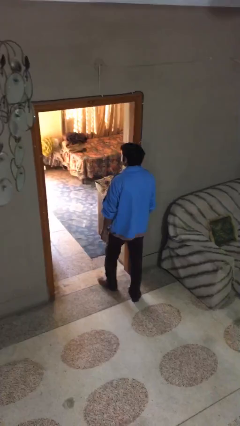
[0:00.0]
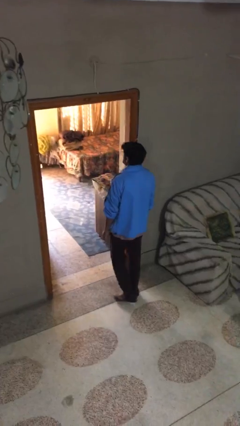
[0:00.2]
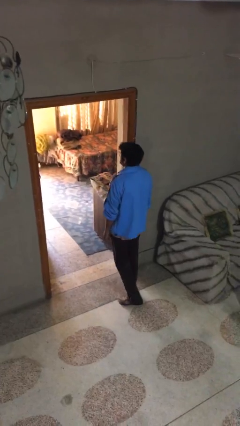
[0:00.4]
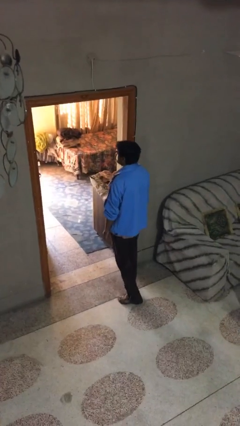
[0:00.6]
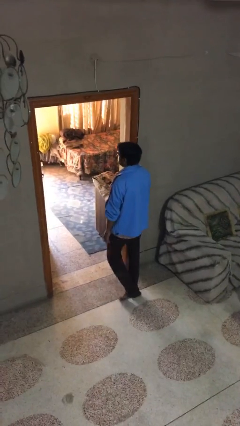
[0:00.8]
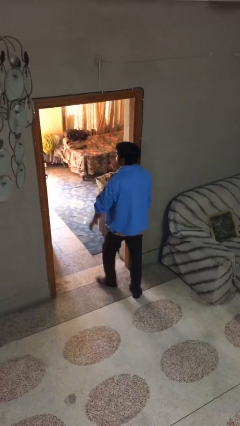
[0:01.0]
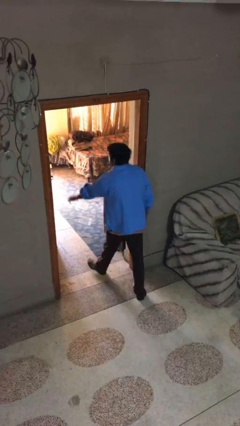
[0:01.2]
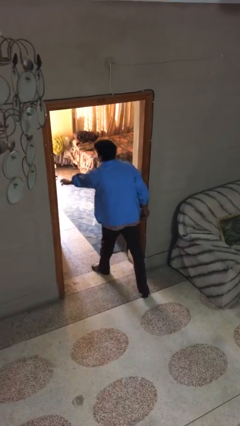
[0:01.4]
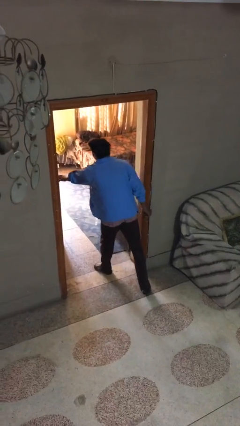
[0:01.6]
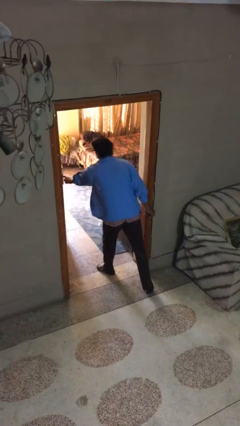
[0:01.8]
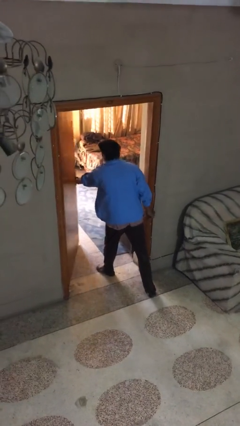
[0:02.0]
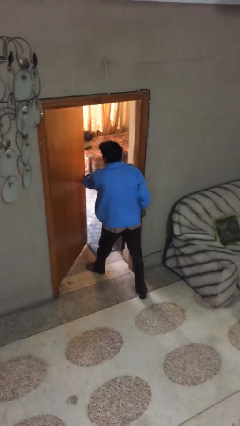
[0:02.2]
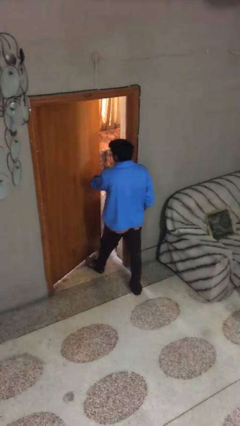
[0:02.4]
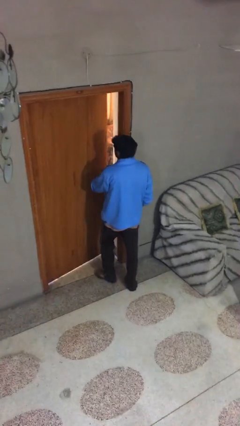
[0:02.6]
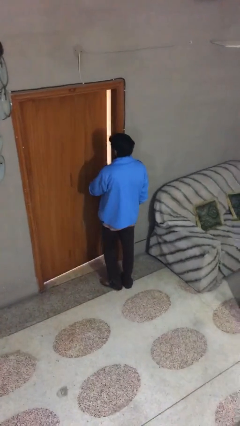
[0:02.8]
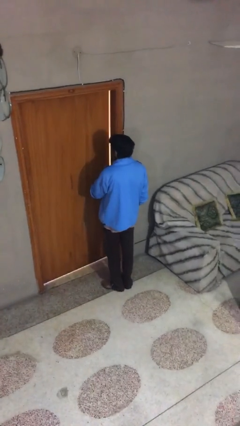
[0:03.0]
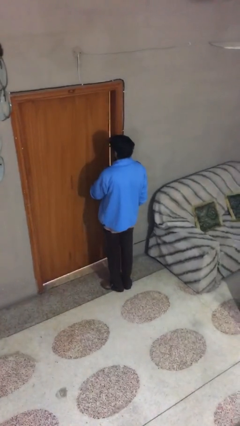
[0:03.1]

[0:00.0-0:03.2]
person closes facility door

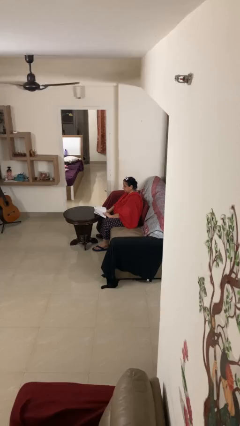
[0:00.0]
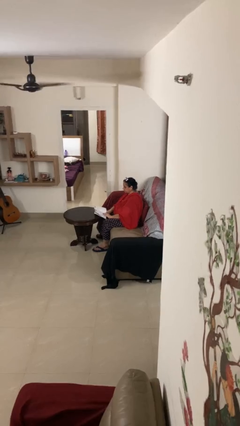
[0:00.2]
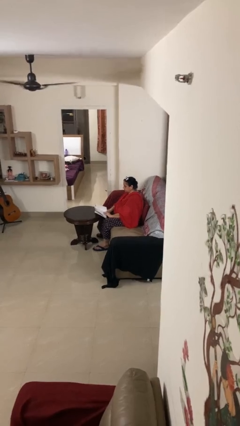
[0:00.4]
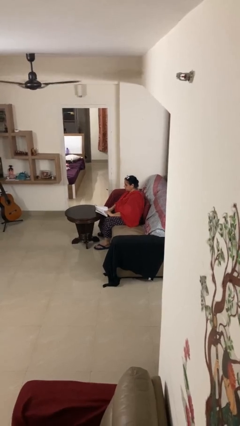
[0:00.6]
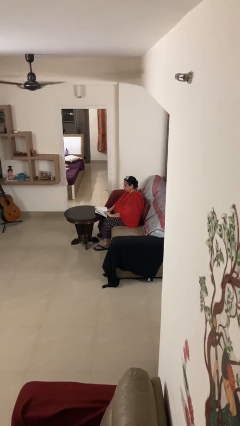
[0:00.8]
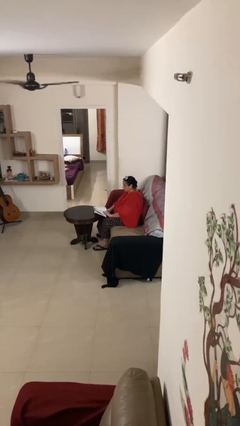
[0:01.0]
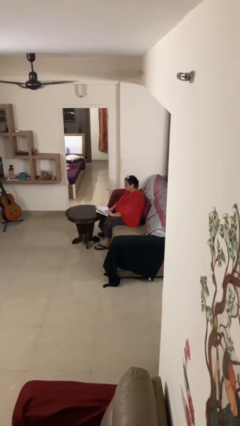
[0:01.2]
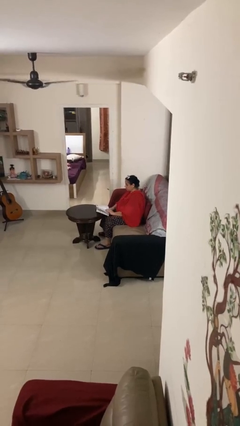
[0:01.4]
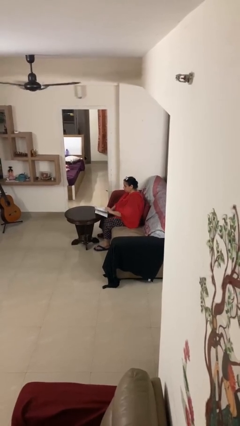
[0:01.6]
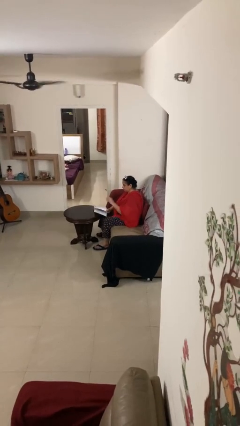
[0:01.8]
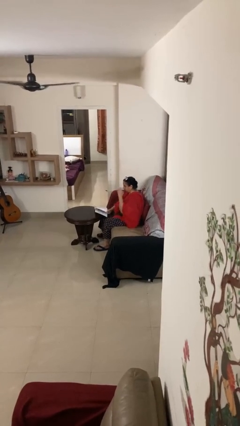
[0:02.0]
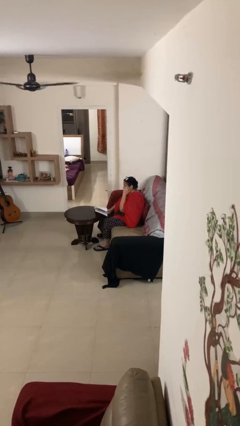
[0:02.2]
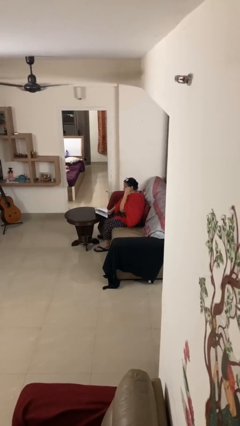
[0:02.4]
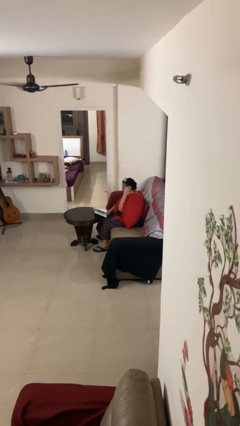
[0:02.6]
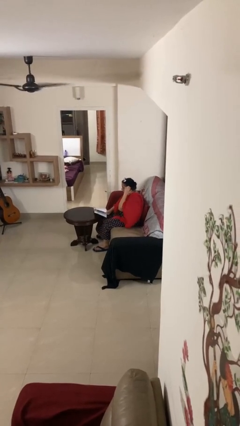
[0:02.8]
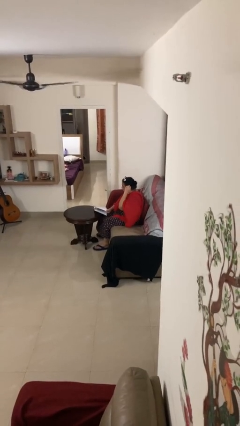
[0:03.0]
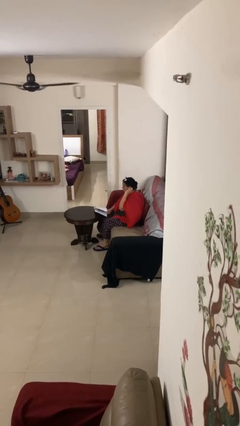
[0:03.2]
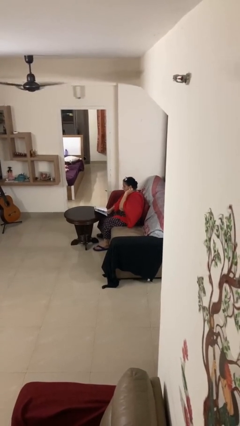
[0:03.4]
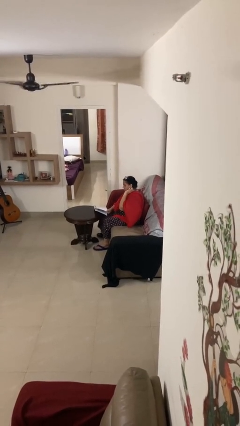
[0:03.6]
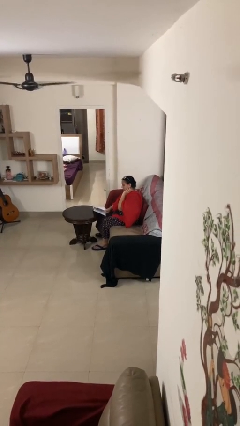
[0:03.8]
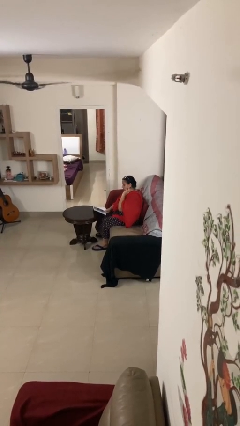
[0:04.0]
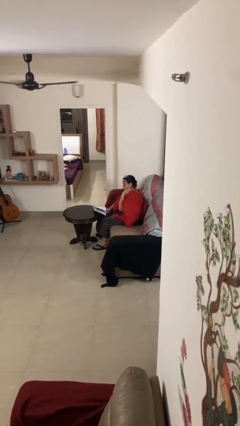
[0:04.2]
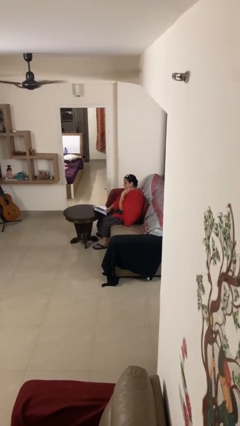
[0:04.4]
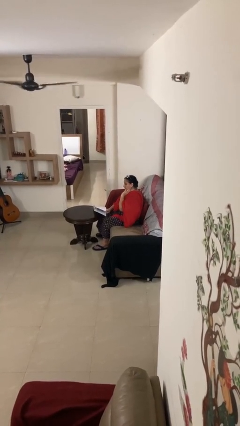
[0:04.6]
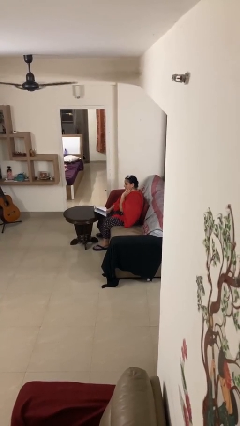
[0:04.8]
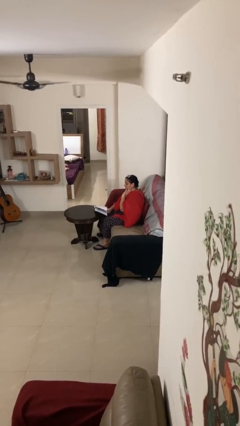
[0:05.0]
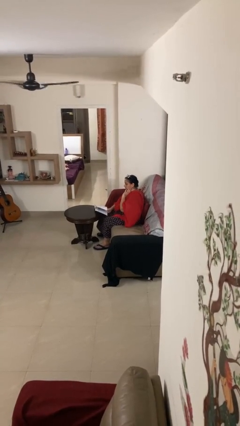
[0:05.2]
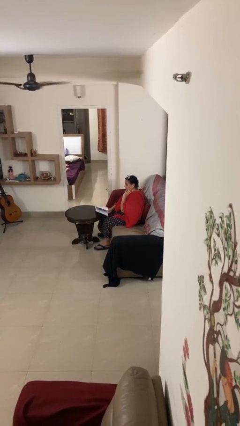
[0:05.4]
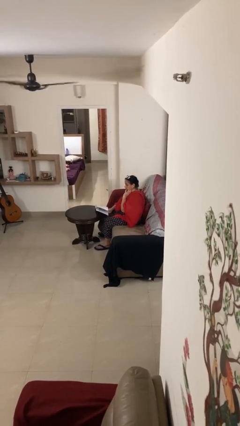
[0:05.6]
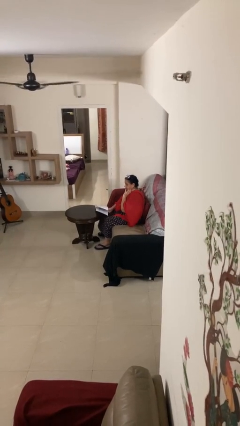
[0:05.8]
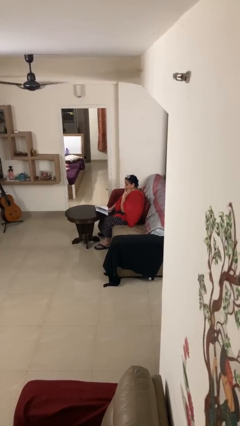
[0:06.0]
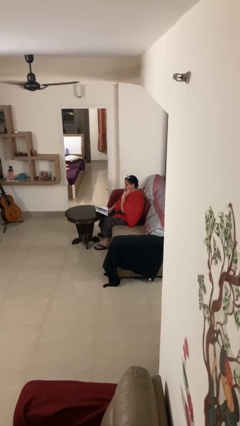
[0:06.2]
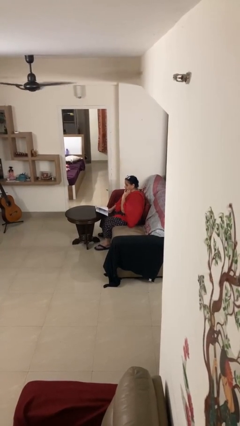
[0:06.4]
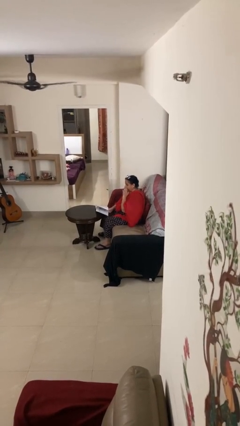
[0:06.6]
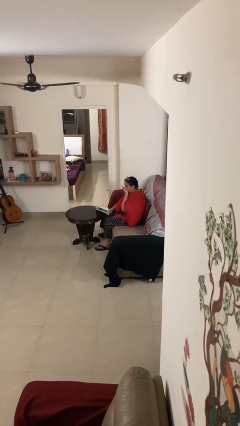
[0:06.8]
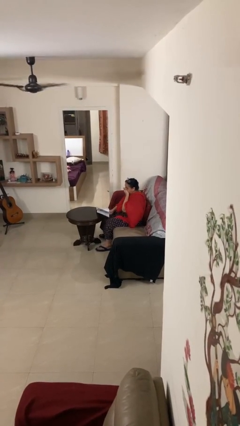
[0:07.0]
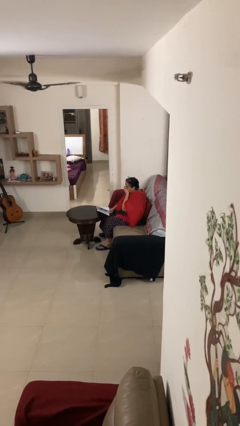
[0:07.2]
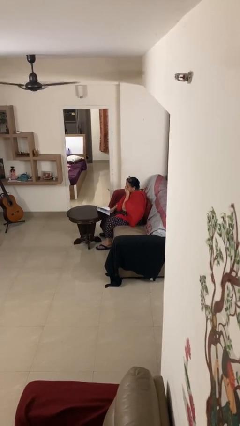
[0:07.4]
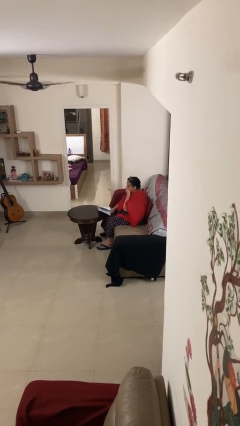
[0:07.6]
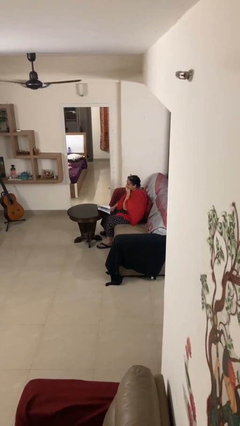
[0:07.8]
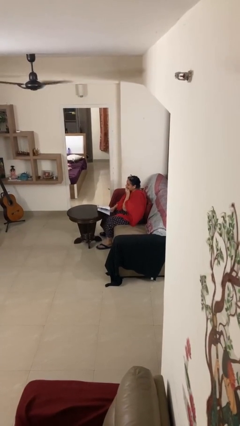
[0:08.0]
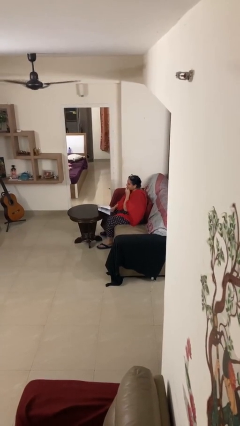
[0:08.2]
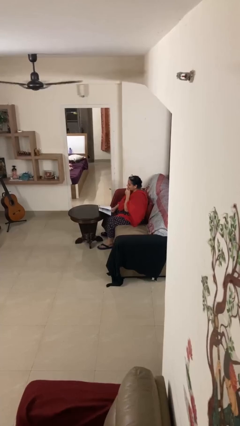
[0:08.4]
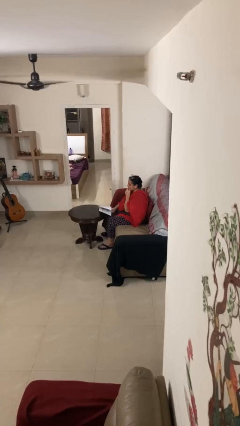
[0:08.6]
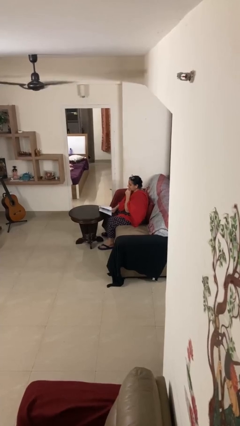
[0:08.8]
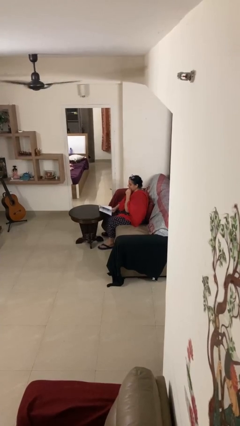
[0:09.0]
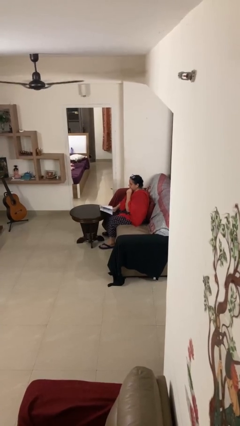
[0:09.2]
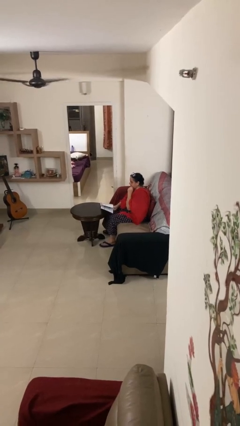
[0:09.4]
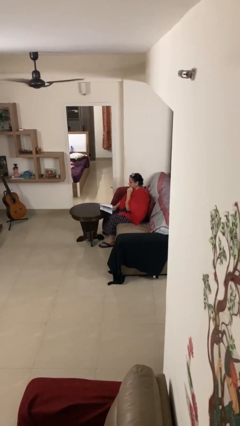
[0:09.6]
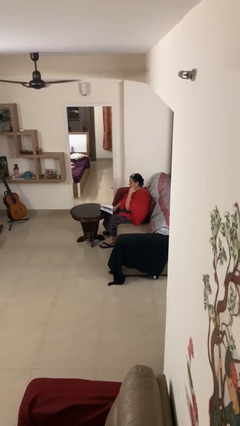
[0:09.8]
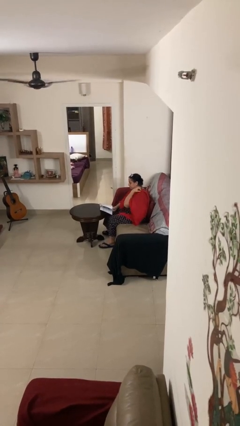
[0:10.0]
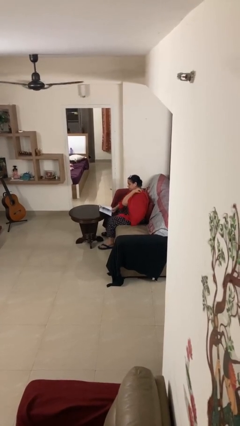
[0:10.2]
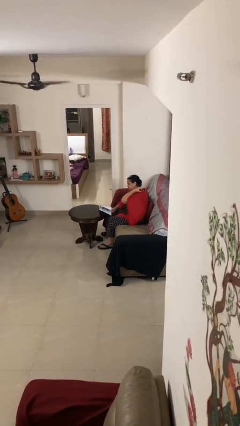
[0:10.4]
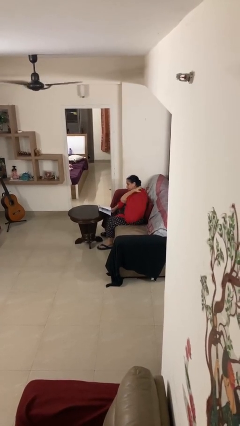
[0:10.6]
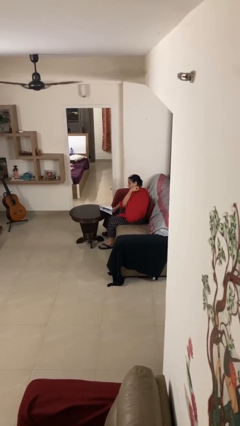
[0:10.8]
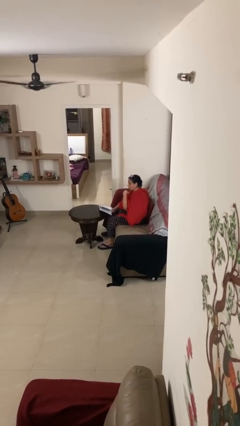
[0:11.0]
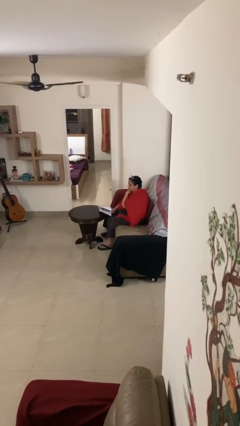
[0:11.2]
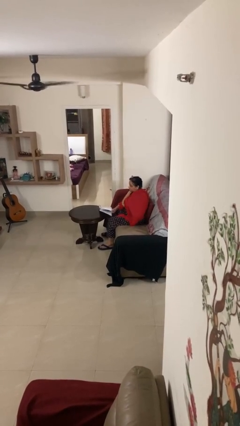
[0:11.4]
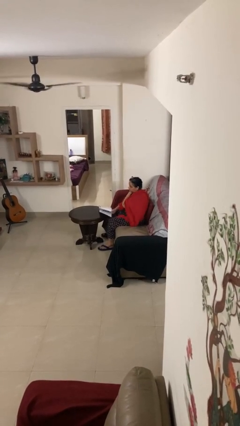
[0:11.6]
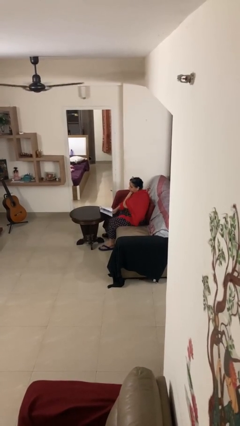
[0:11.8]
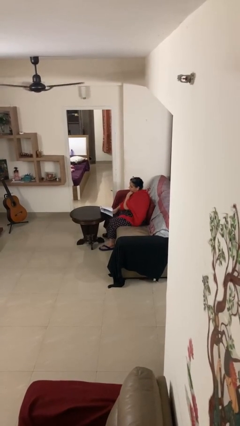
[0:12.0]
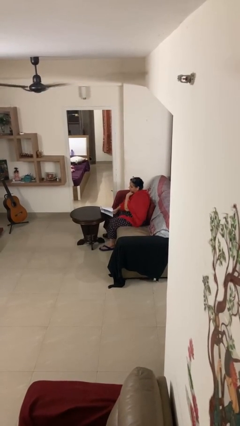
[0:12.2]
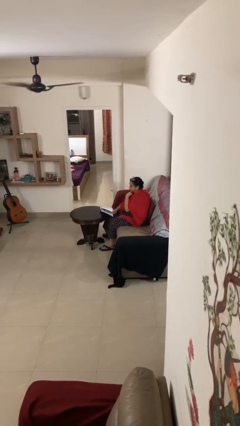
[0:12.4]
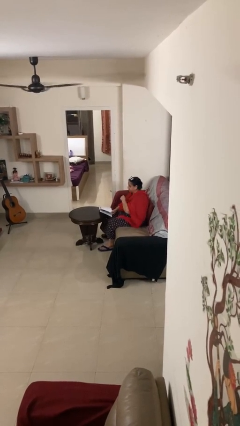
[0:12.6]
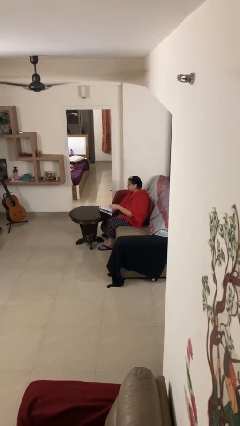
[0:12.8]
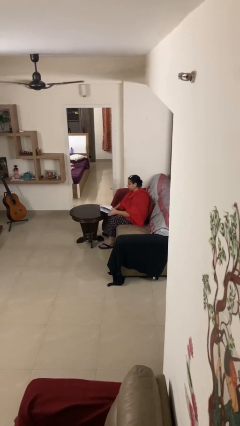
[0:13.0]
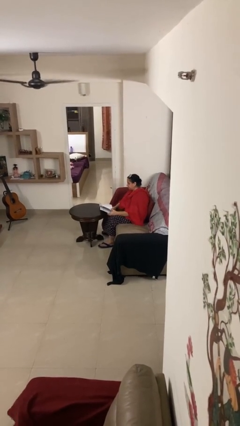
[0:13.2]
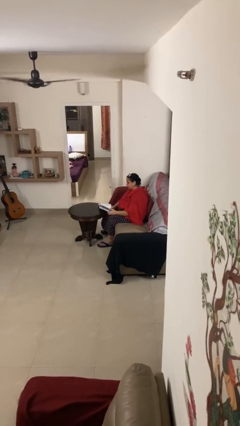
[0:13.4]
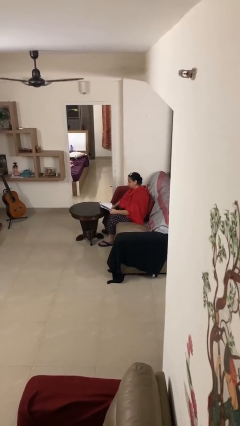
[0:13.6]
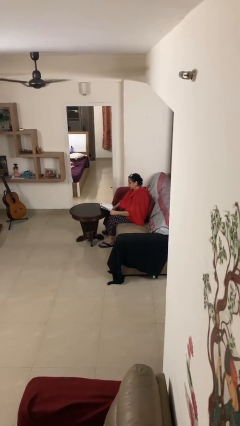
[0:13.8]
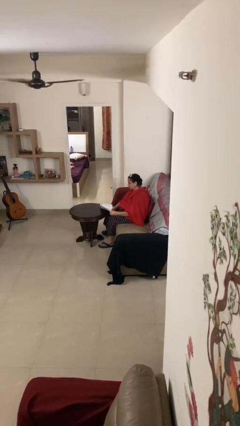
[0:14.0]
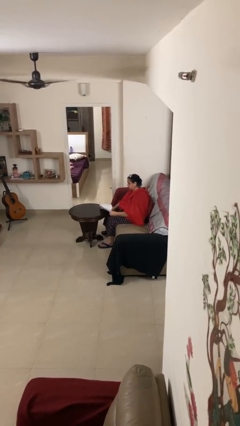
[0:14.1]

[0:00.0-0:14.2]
person reads document

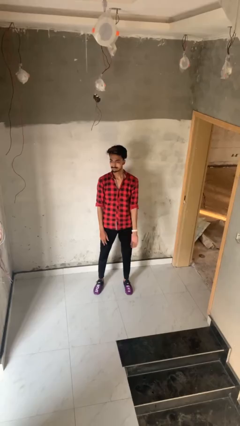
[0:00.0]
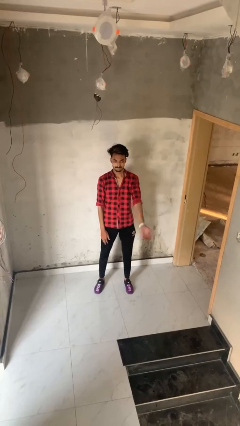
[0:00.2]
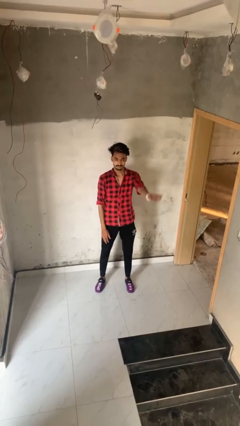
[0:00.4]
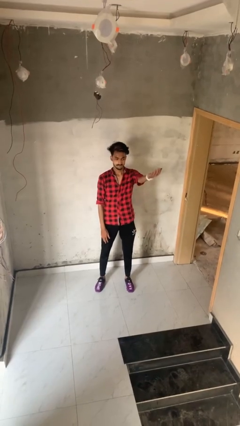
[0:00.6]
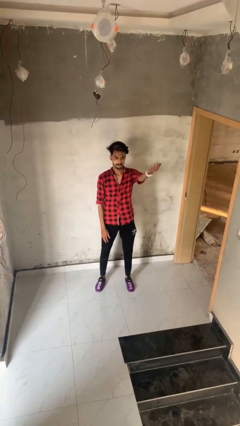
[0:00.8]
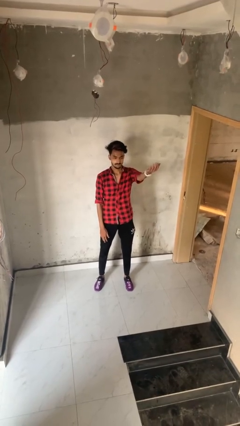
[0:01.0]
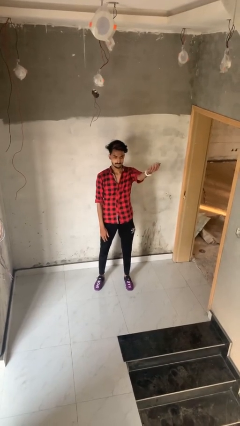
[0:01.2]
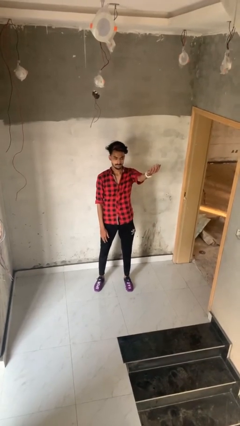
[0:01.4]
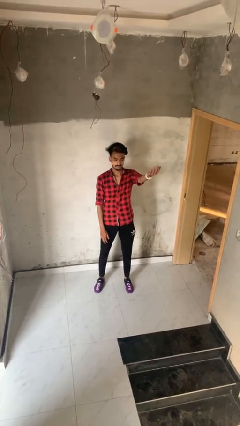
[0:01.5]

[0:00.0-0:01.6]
person gestures swipe up
